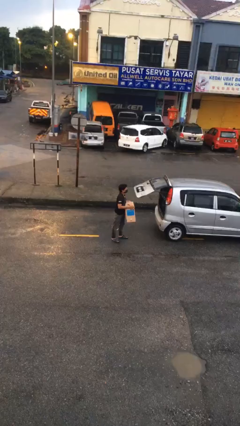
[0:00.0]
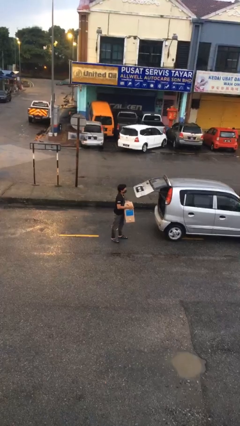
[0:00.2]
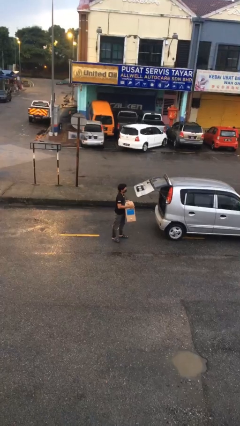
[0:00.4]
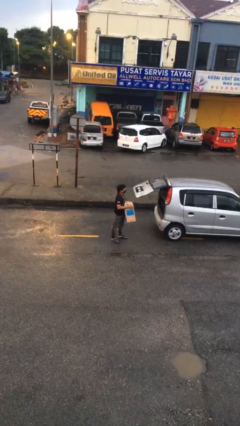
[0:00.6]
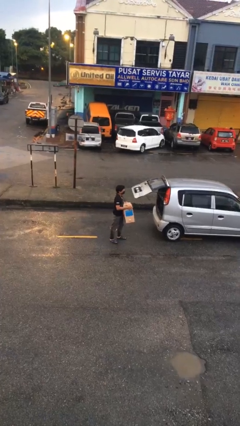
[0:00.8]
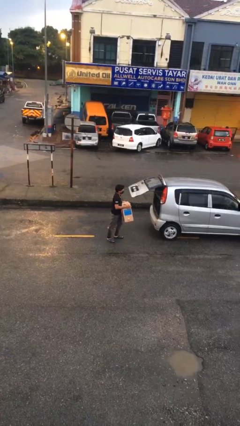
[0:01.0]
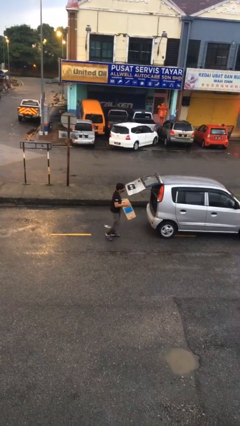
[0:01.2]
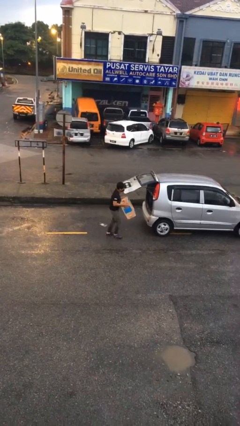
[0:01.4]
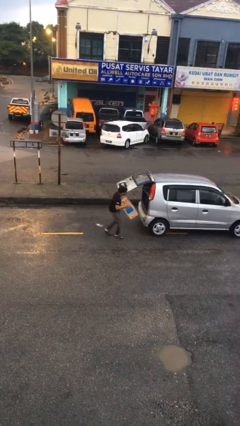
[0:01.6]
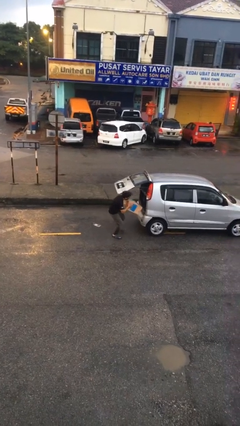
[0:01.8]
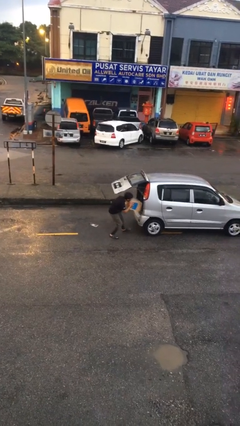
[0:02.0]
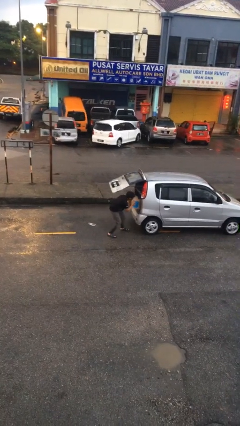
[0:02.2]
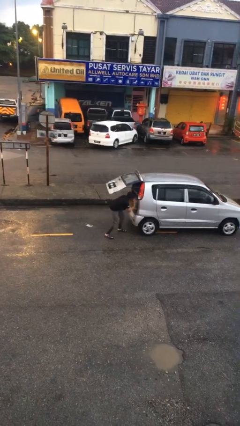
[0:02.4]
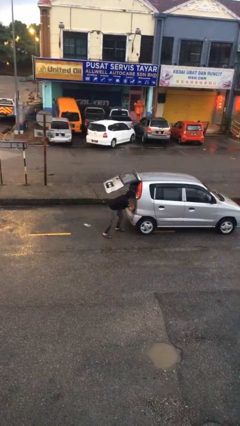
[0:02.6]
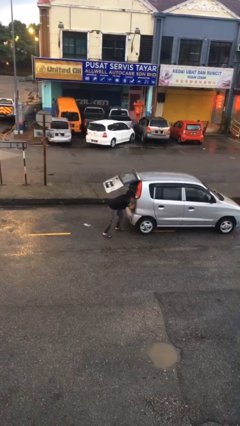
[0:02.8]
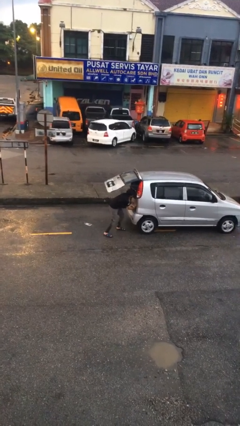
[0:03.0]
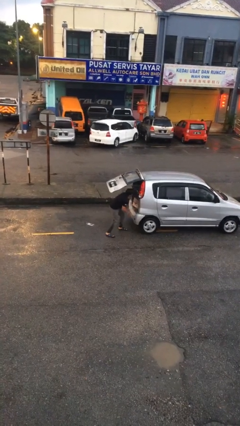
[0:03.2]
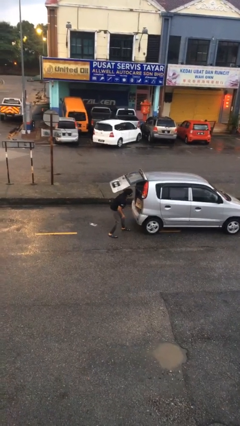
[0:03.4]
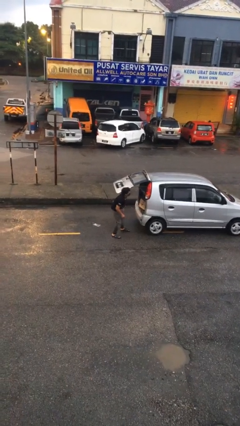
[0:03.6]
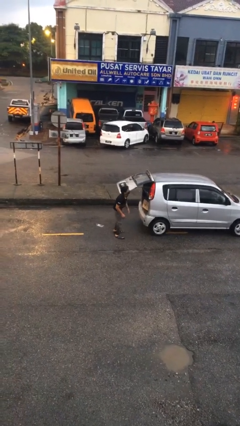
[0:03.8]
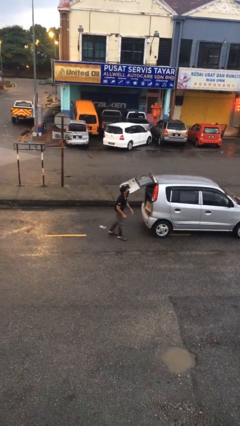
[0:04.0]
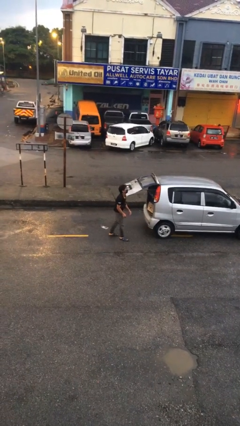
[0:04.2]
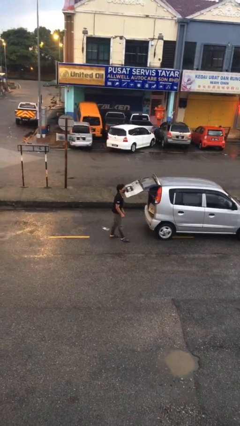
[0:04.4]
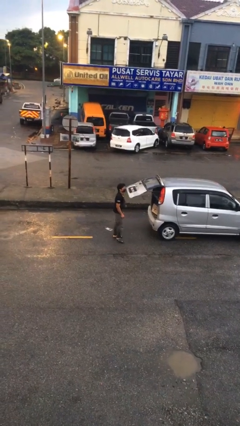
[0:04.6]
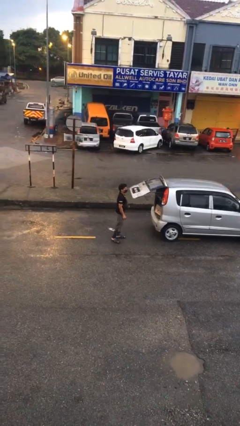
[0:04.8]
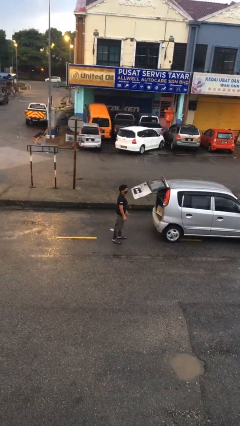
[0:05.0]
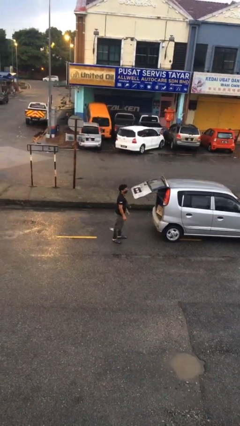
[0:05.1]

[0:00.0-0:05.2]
person loads car

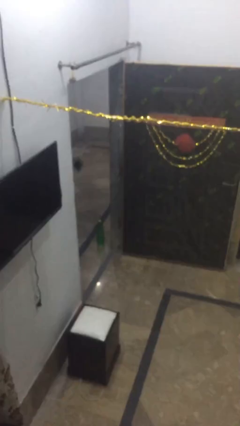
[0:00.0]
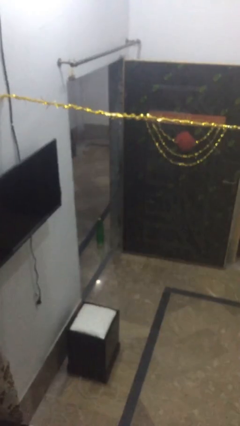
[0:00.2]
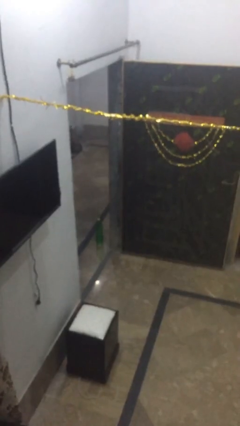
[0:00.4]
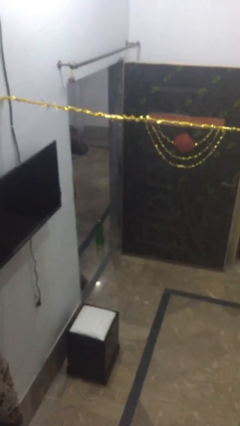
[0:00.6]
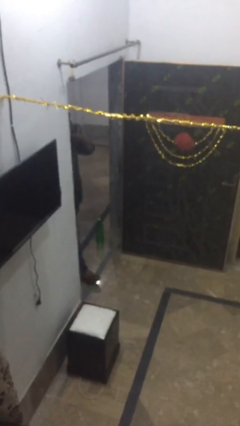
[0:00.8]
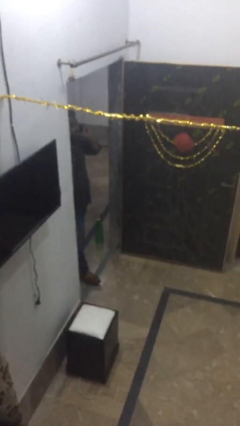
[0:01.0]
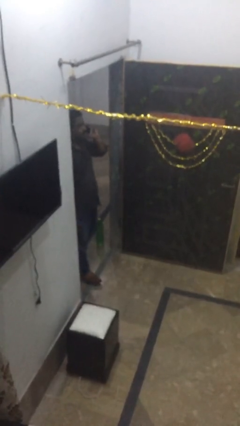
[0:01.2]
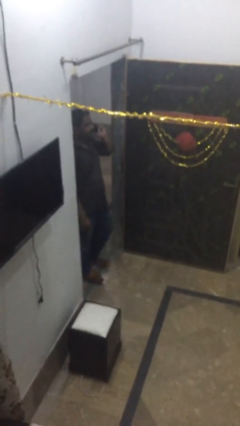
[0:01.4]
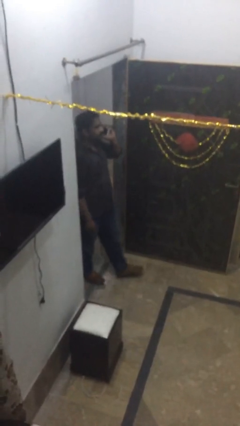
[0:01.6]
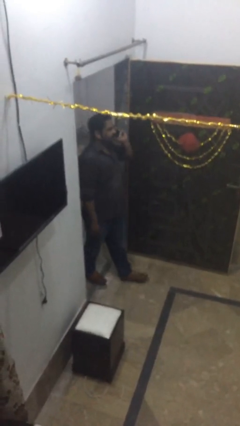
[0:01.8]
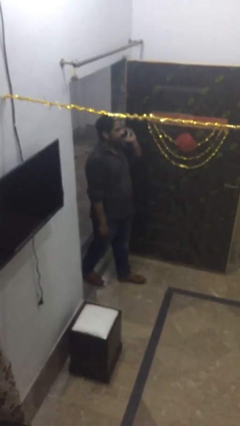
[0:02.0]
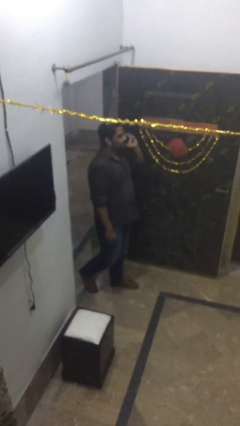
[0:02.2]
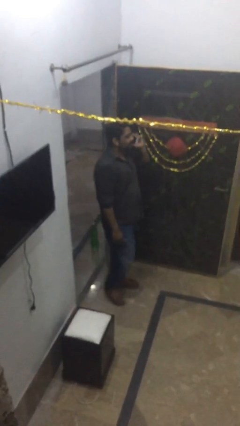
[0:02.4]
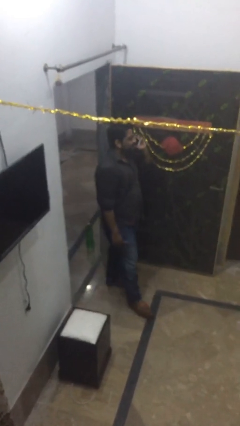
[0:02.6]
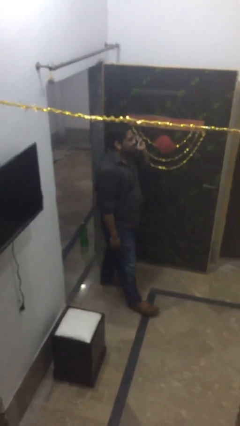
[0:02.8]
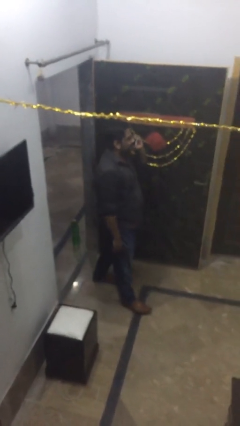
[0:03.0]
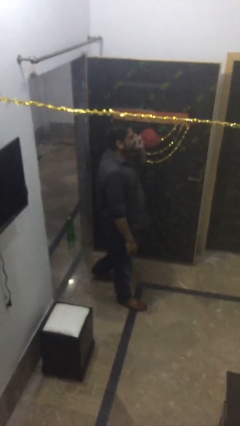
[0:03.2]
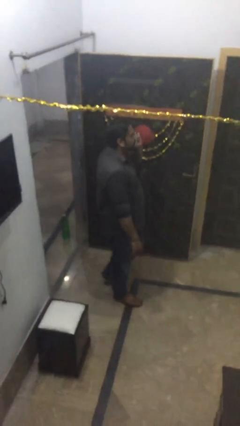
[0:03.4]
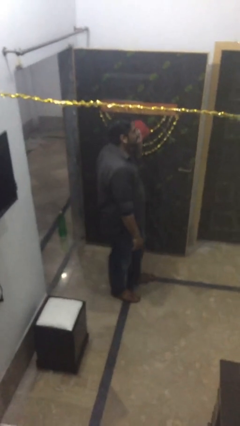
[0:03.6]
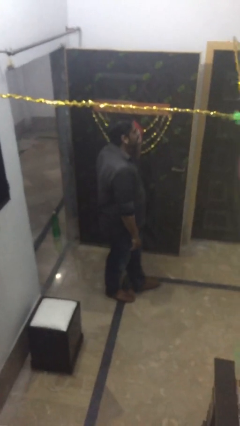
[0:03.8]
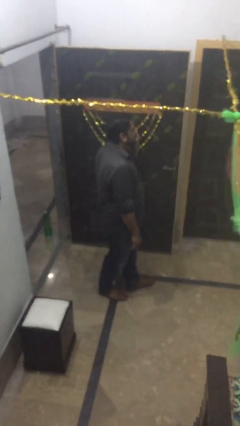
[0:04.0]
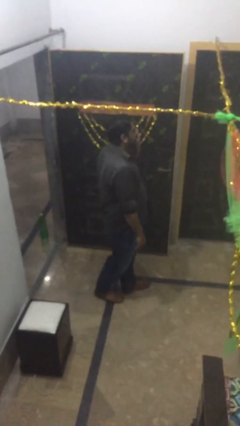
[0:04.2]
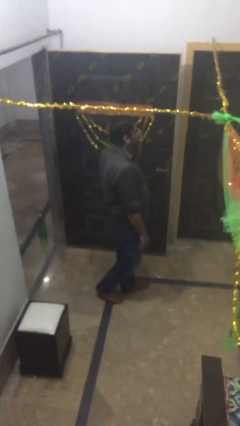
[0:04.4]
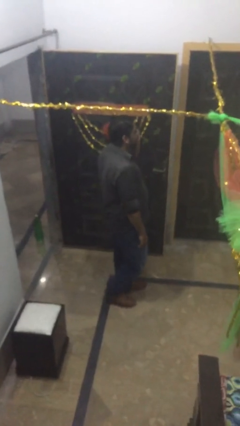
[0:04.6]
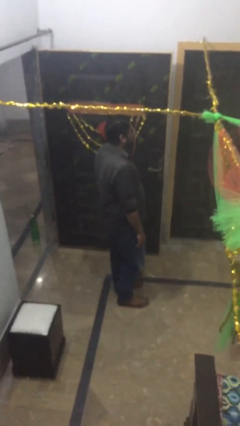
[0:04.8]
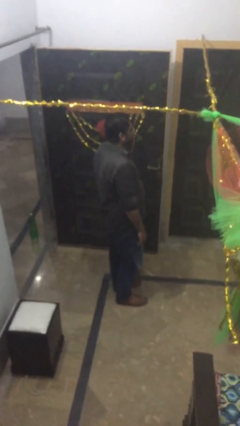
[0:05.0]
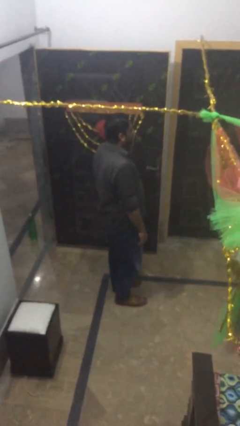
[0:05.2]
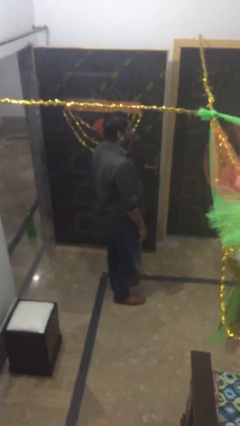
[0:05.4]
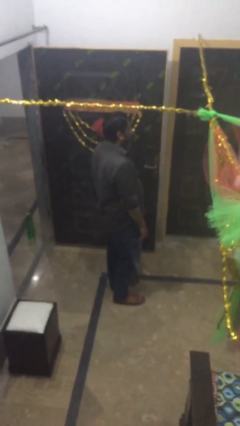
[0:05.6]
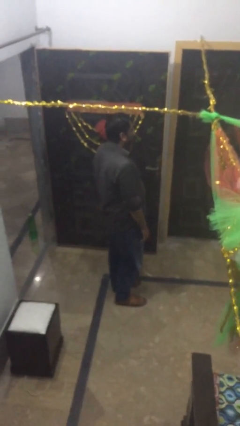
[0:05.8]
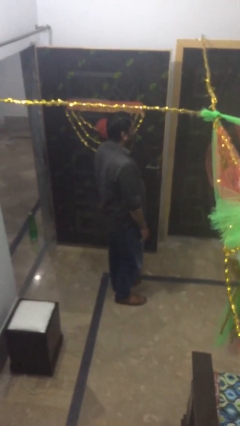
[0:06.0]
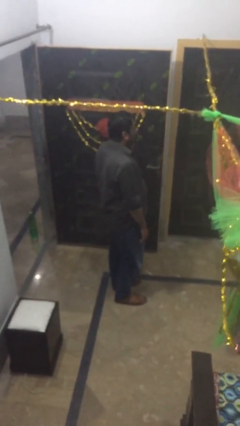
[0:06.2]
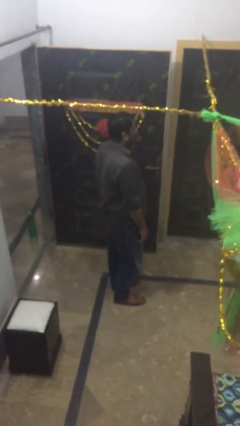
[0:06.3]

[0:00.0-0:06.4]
person enters scene through structure

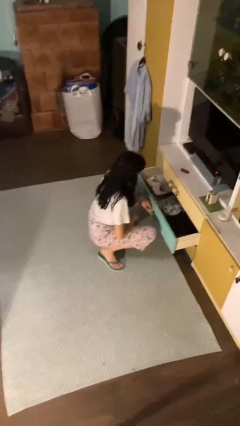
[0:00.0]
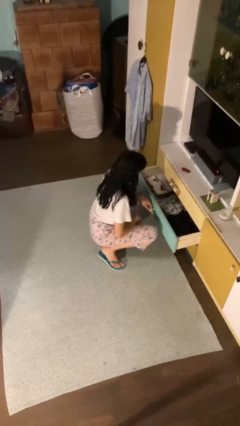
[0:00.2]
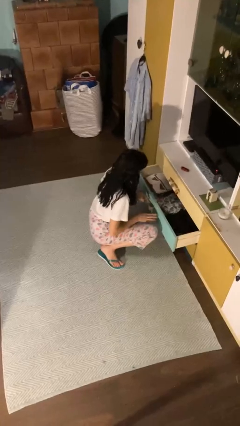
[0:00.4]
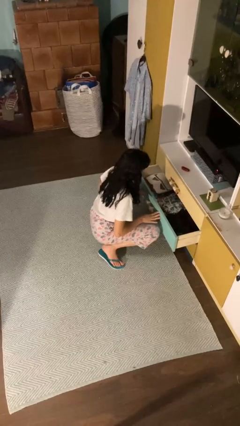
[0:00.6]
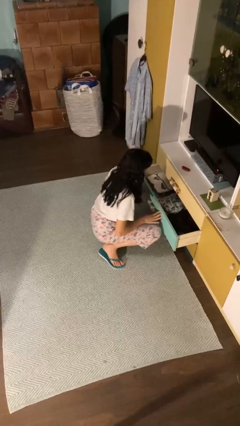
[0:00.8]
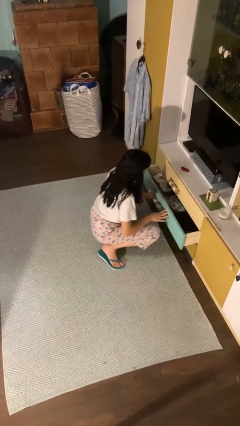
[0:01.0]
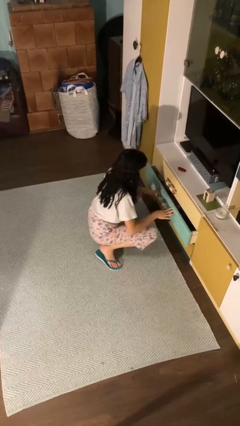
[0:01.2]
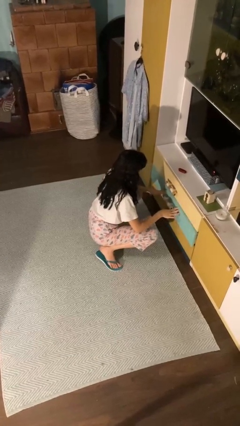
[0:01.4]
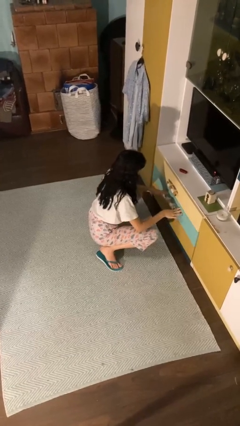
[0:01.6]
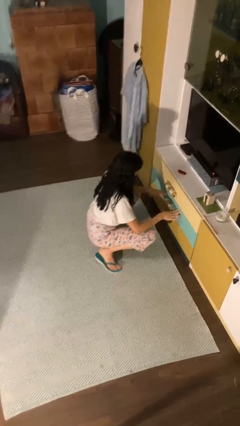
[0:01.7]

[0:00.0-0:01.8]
person closes dresser drawer

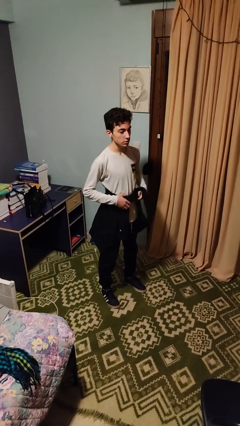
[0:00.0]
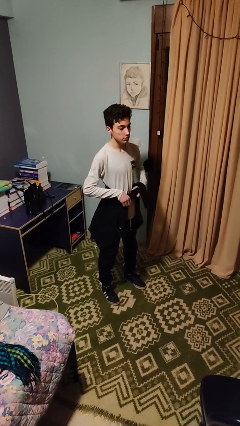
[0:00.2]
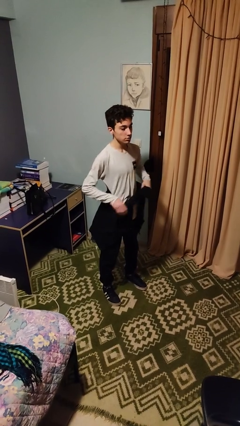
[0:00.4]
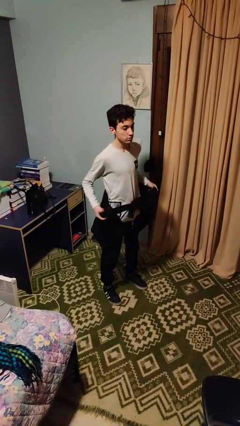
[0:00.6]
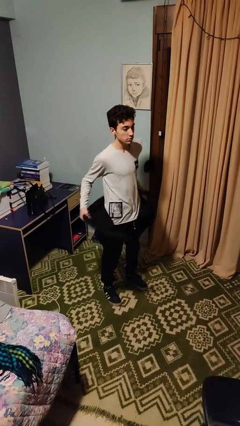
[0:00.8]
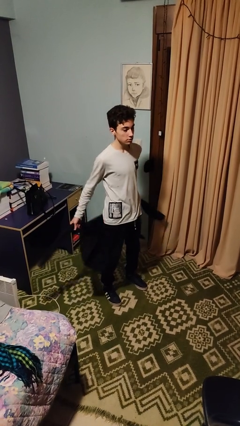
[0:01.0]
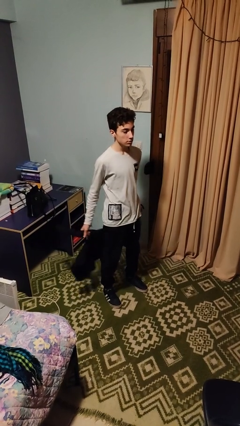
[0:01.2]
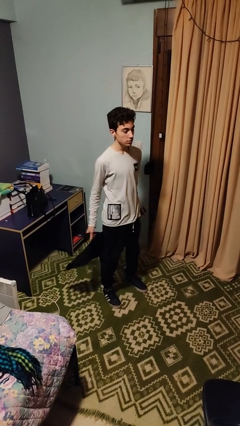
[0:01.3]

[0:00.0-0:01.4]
person unties jacket around waist

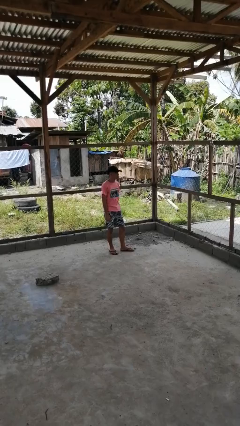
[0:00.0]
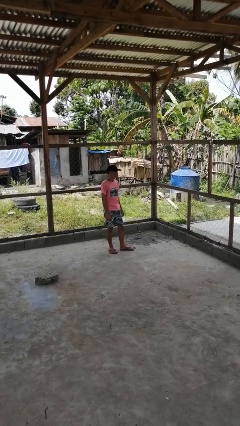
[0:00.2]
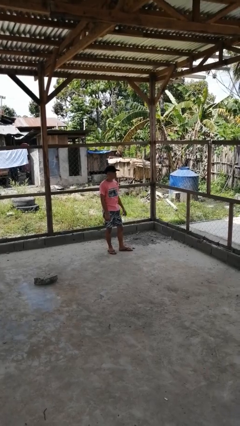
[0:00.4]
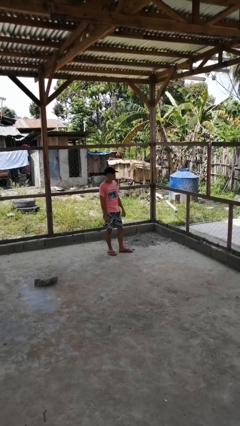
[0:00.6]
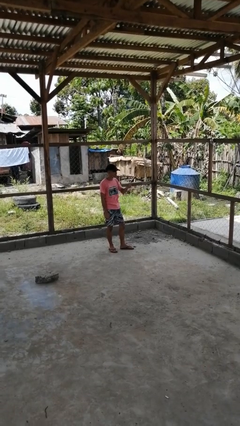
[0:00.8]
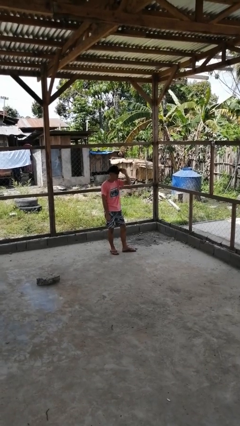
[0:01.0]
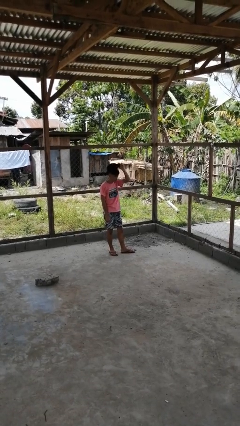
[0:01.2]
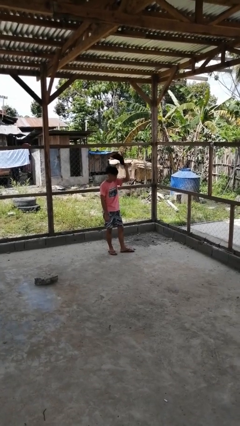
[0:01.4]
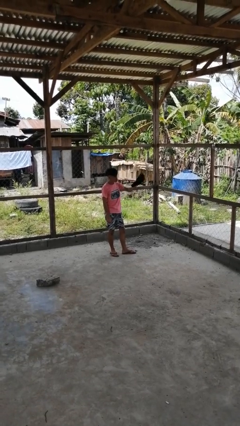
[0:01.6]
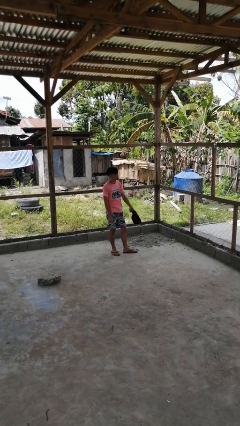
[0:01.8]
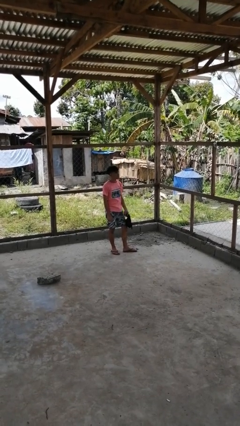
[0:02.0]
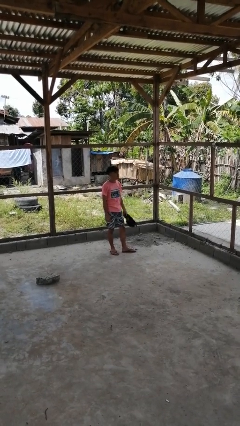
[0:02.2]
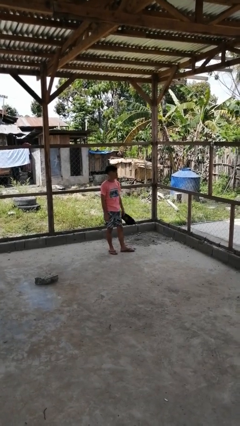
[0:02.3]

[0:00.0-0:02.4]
person takes off hat

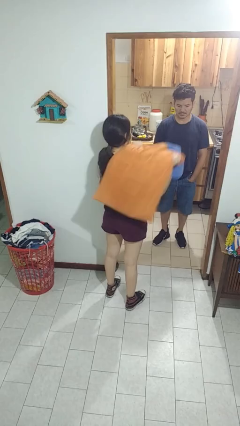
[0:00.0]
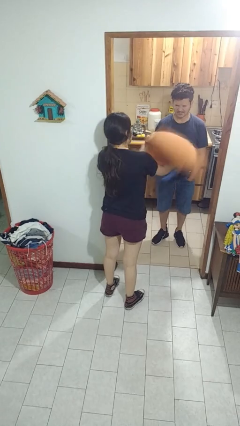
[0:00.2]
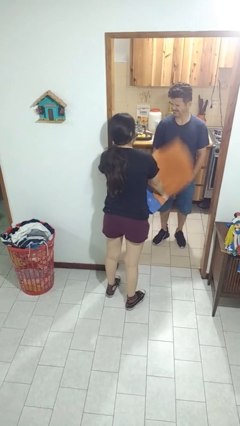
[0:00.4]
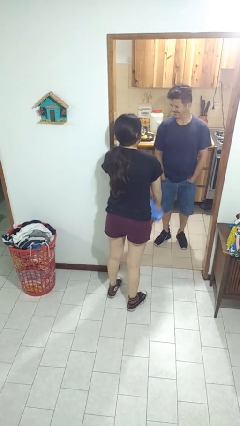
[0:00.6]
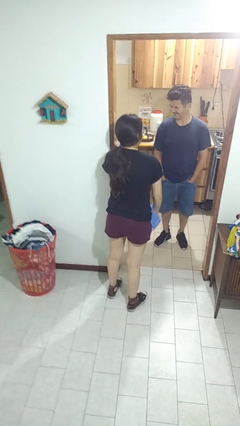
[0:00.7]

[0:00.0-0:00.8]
person hits person with pillow
